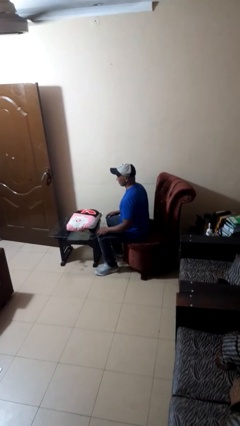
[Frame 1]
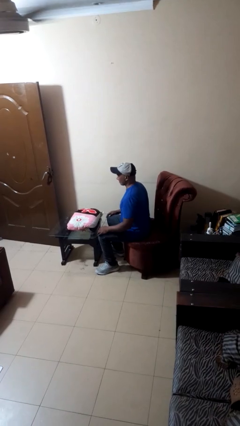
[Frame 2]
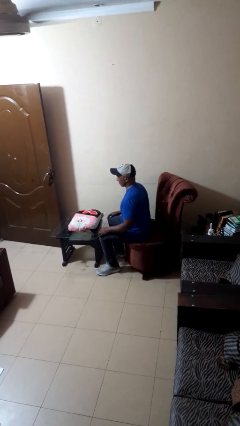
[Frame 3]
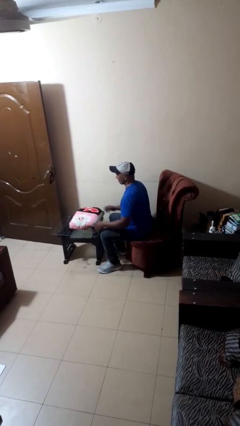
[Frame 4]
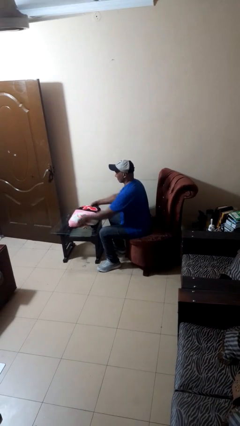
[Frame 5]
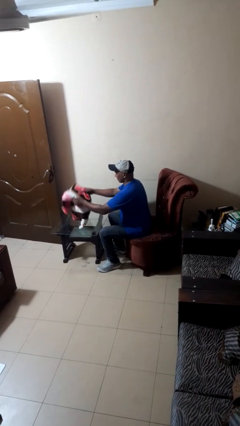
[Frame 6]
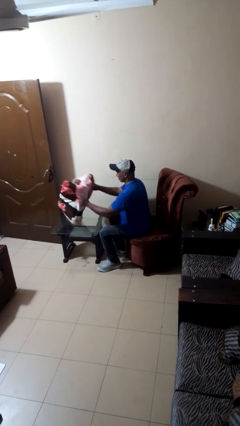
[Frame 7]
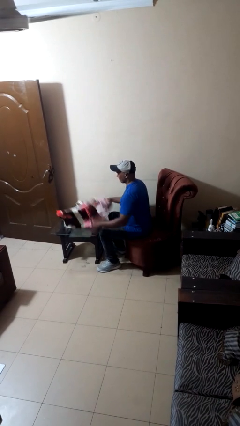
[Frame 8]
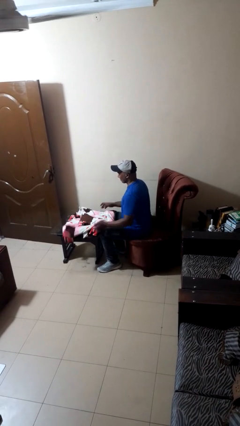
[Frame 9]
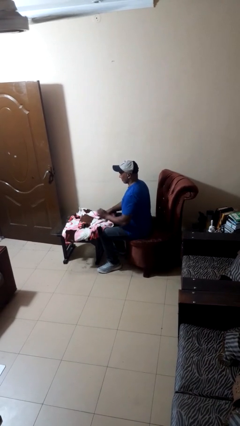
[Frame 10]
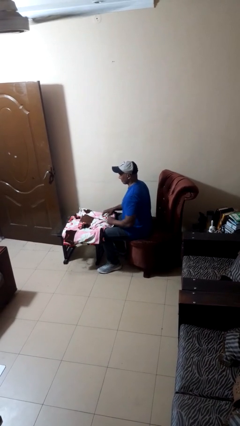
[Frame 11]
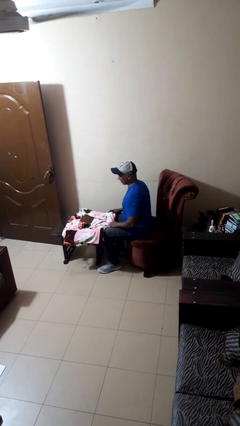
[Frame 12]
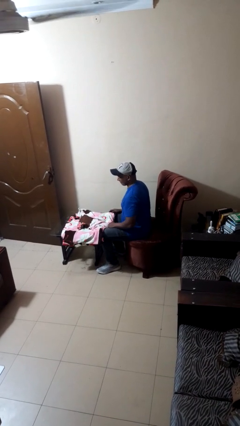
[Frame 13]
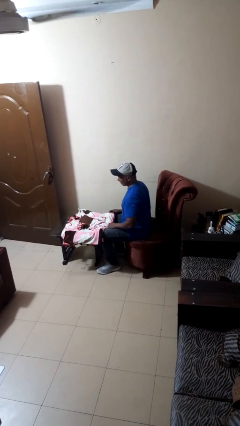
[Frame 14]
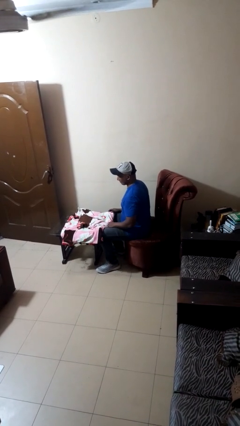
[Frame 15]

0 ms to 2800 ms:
person unfolds blanket

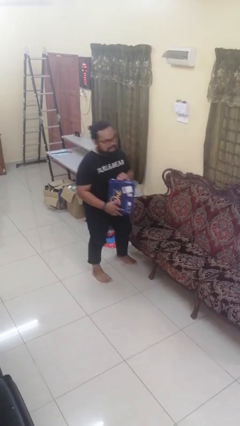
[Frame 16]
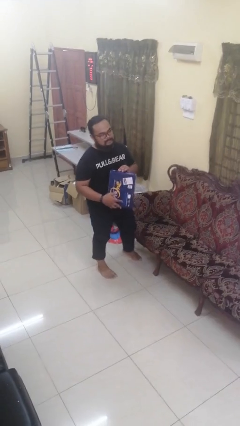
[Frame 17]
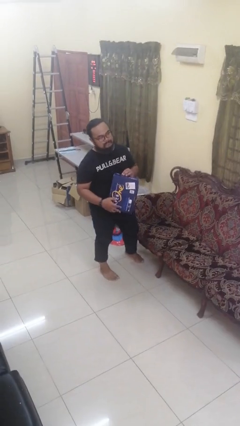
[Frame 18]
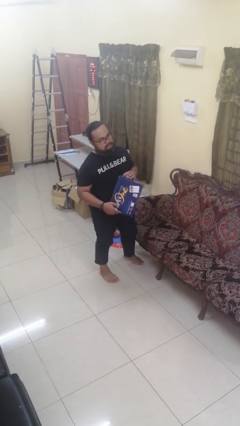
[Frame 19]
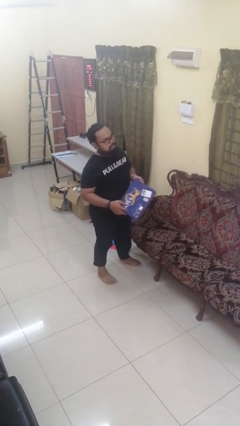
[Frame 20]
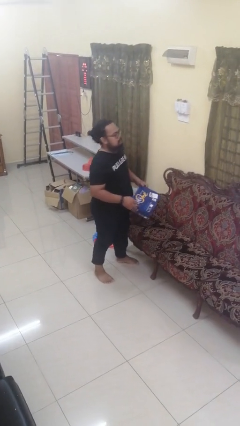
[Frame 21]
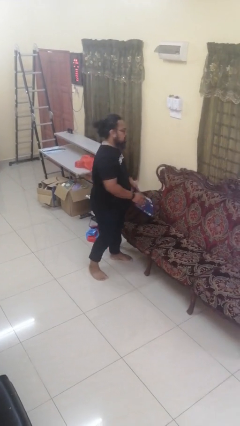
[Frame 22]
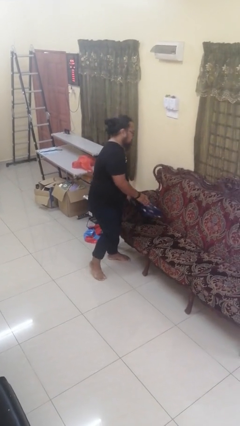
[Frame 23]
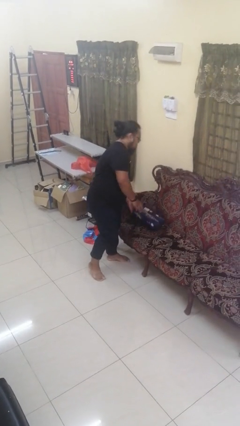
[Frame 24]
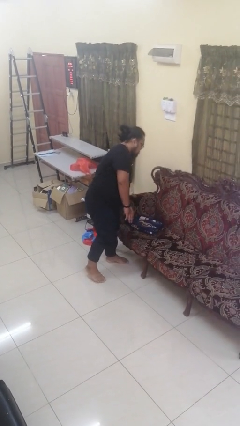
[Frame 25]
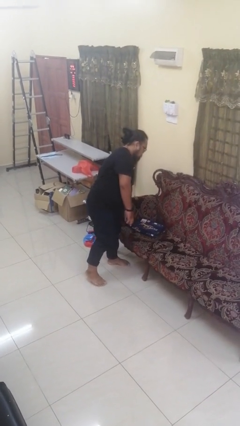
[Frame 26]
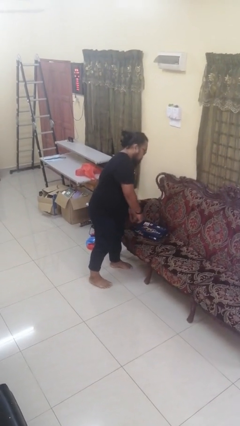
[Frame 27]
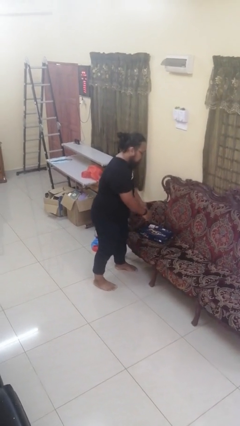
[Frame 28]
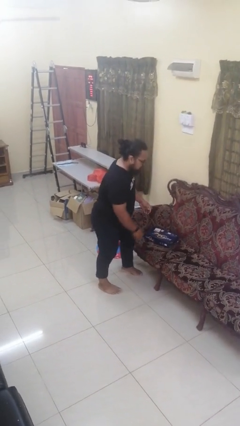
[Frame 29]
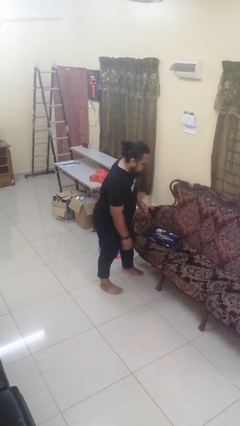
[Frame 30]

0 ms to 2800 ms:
person puts down object on couch

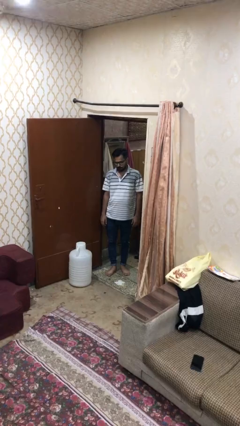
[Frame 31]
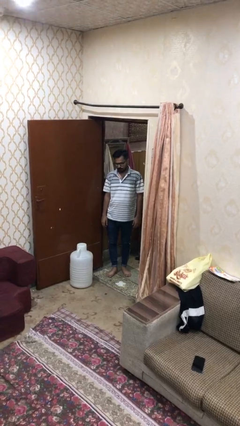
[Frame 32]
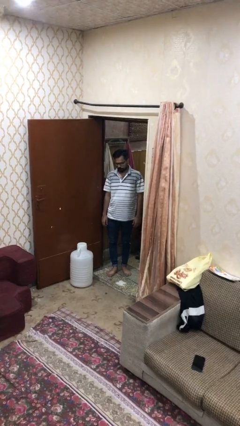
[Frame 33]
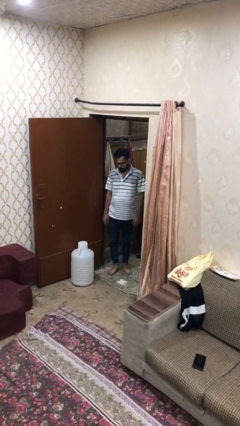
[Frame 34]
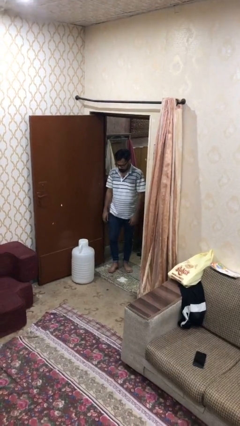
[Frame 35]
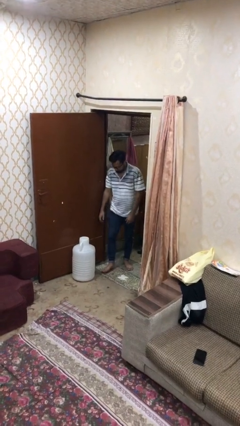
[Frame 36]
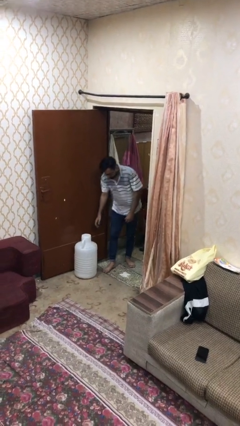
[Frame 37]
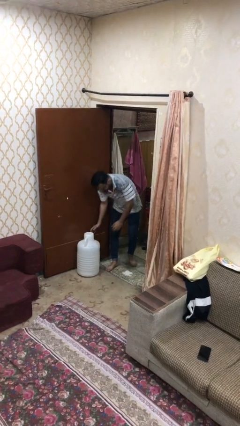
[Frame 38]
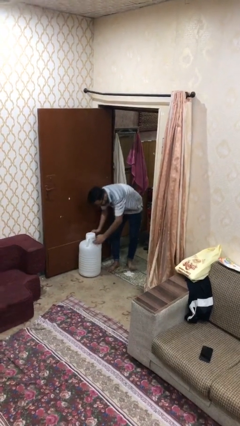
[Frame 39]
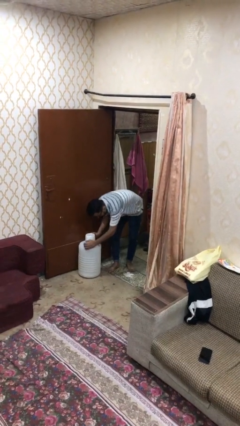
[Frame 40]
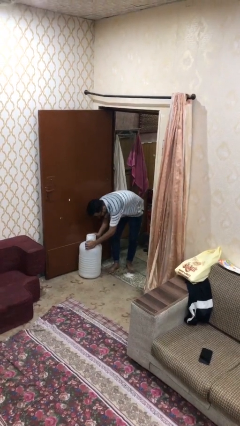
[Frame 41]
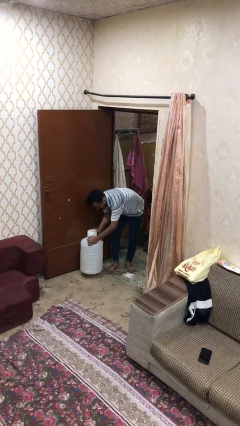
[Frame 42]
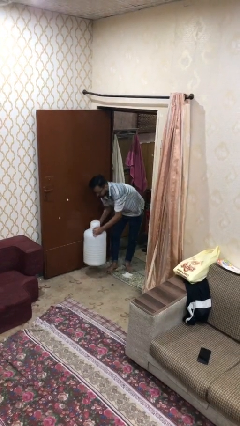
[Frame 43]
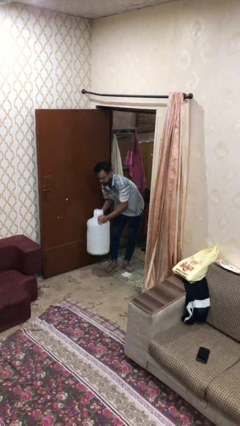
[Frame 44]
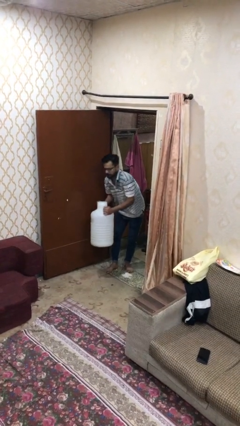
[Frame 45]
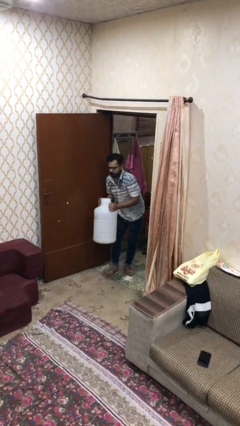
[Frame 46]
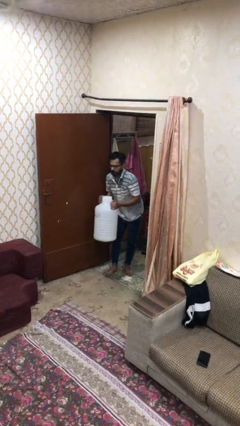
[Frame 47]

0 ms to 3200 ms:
person picks up object from floor

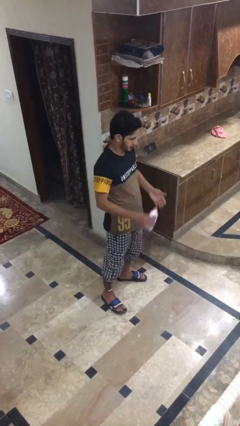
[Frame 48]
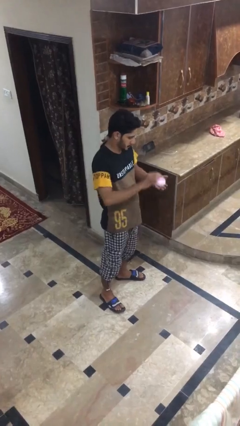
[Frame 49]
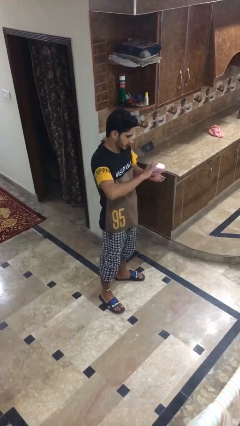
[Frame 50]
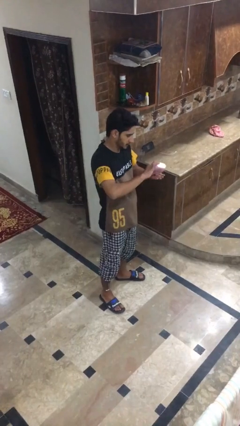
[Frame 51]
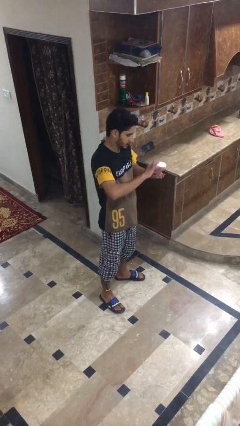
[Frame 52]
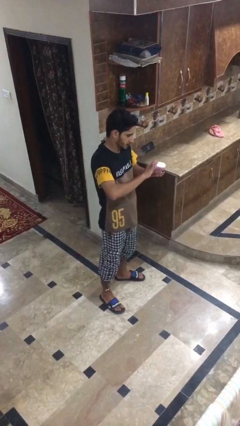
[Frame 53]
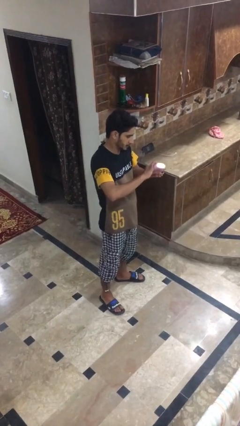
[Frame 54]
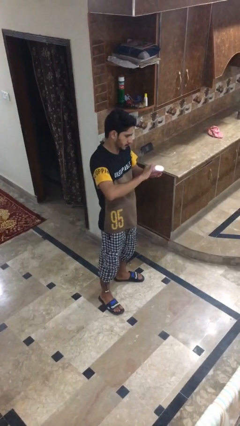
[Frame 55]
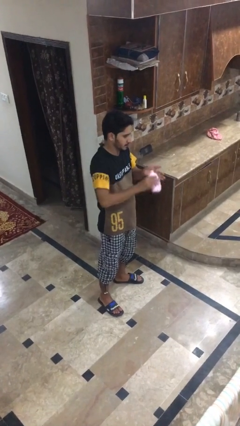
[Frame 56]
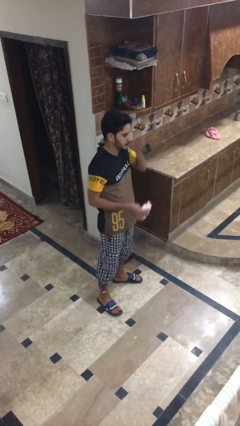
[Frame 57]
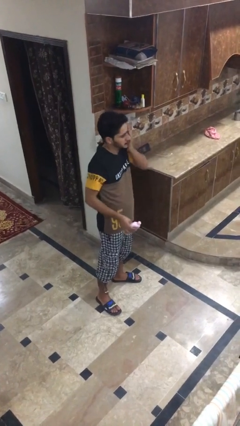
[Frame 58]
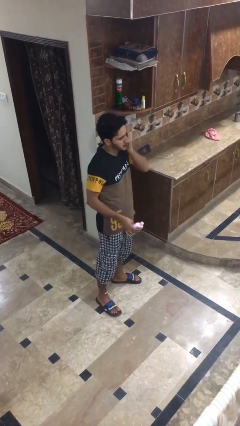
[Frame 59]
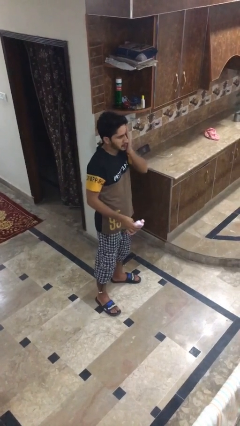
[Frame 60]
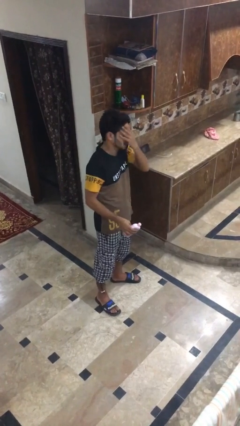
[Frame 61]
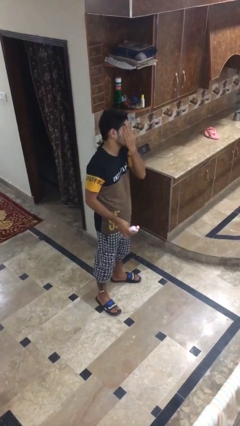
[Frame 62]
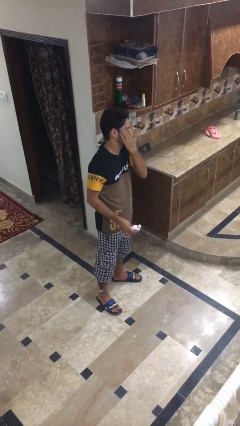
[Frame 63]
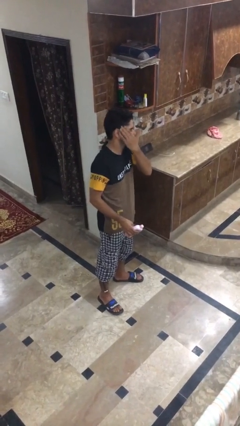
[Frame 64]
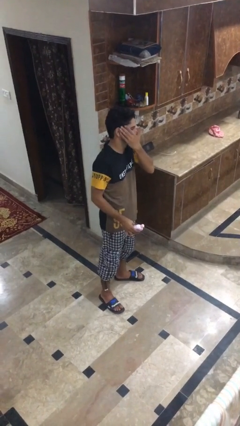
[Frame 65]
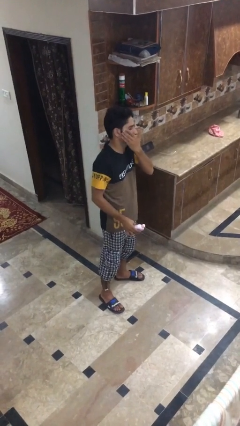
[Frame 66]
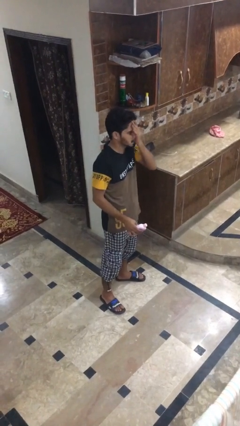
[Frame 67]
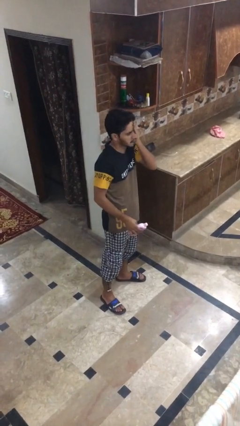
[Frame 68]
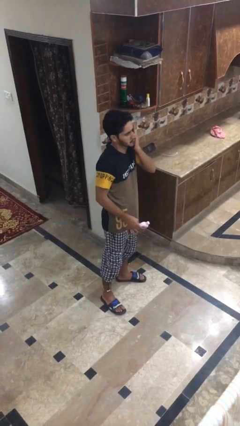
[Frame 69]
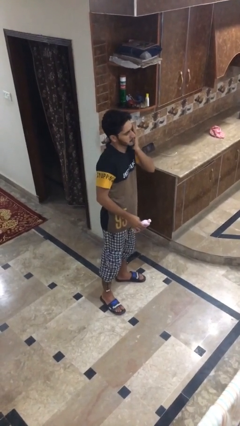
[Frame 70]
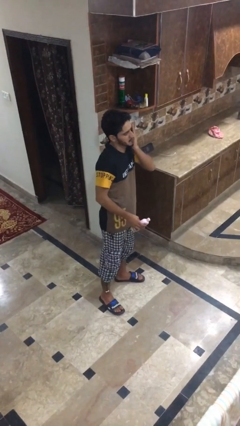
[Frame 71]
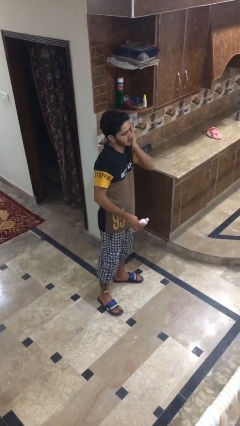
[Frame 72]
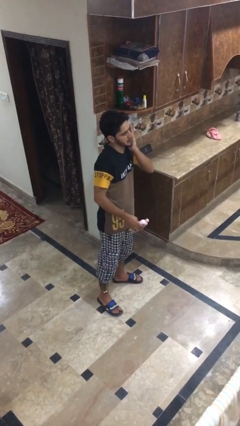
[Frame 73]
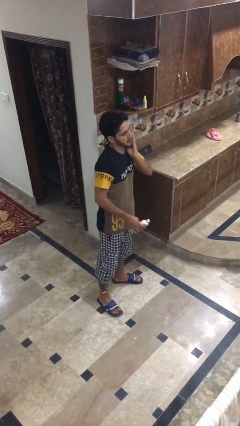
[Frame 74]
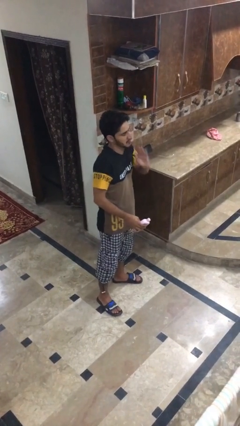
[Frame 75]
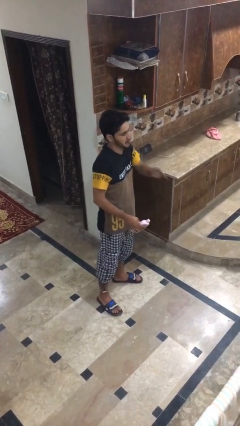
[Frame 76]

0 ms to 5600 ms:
person applies facial moisturizer

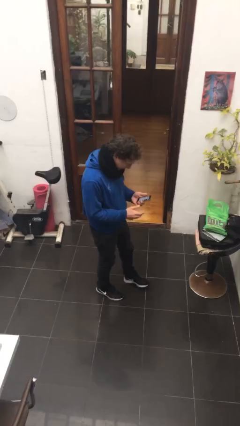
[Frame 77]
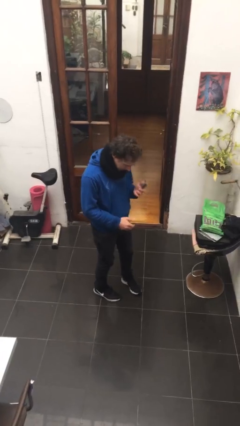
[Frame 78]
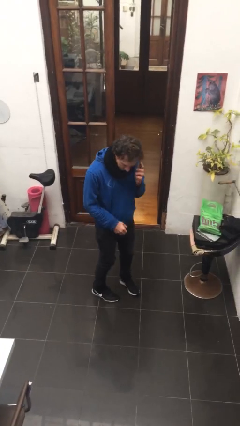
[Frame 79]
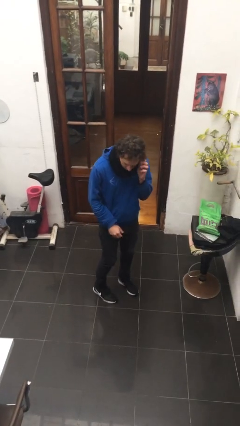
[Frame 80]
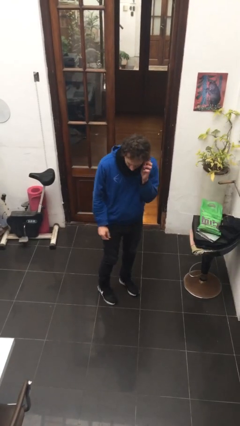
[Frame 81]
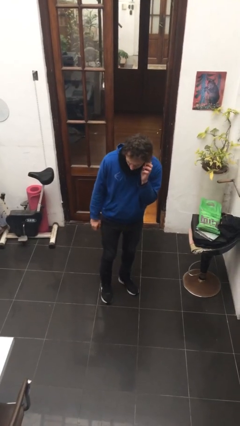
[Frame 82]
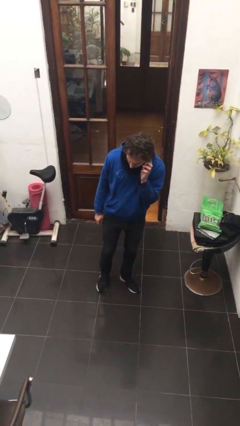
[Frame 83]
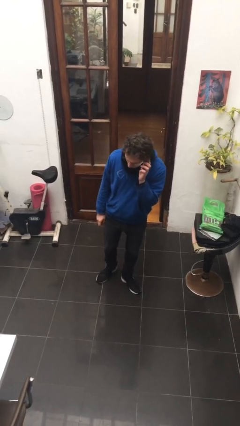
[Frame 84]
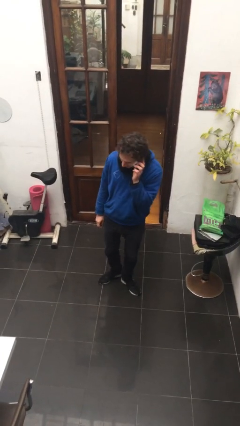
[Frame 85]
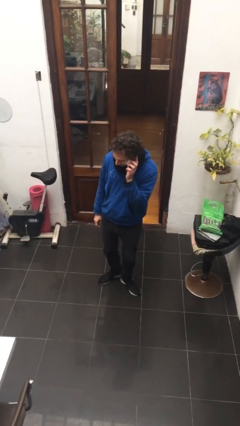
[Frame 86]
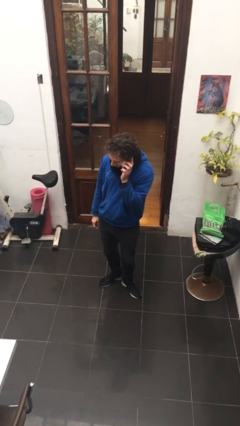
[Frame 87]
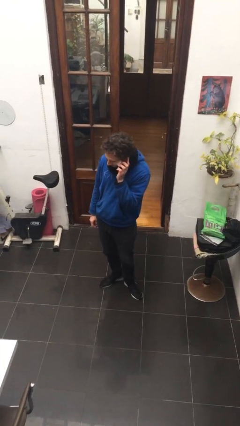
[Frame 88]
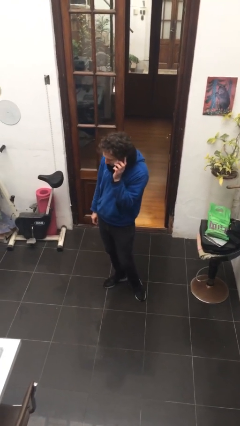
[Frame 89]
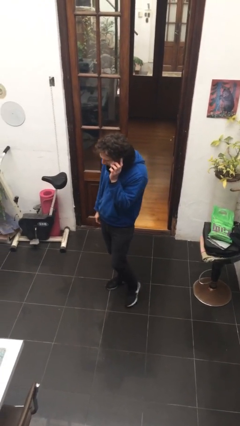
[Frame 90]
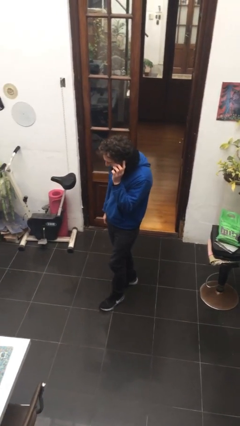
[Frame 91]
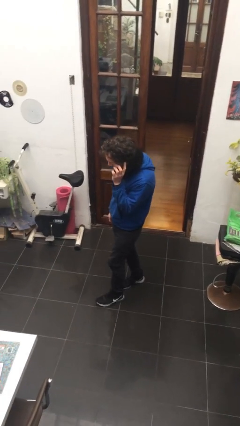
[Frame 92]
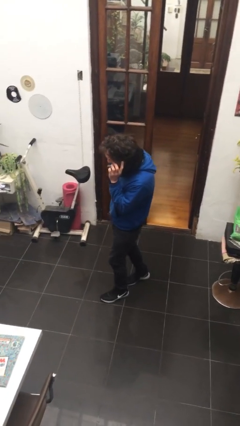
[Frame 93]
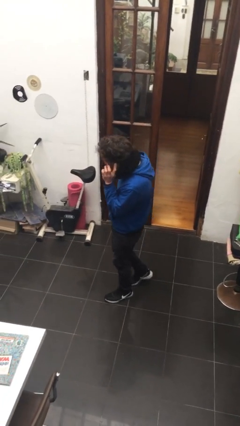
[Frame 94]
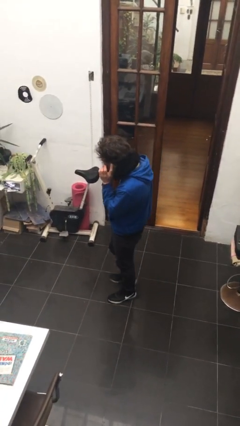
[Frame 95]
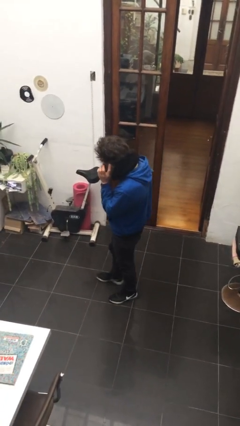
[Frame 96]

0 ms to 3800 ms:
person talks on phone
